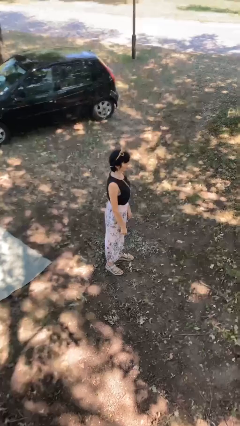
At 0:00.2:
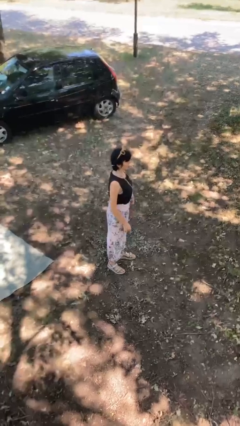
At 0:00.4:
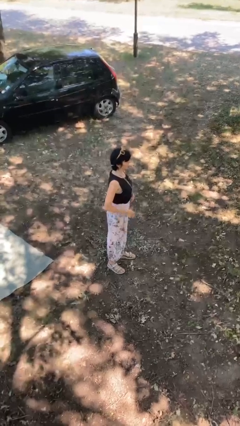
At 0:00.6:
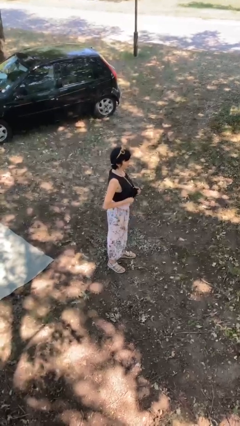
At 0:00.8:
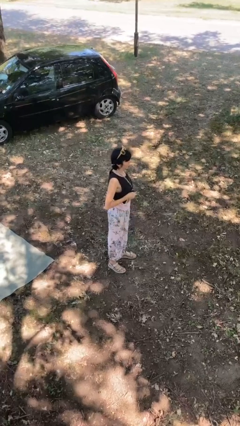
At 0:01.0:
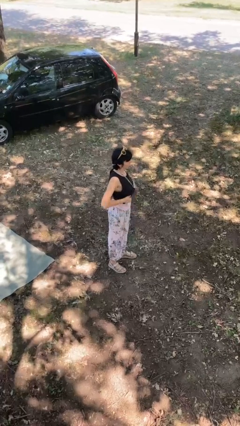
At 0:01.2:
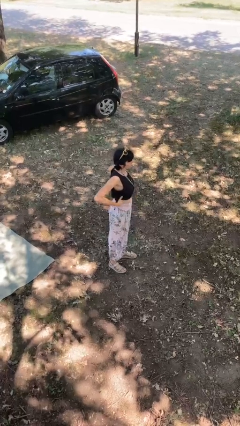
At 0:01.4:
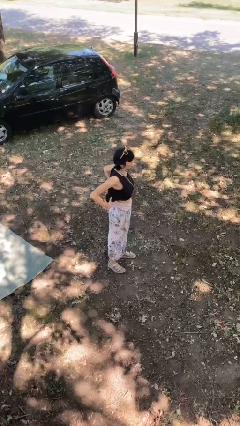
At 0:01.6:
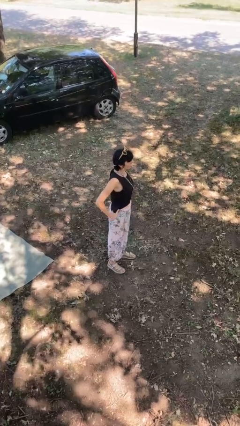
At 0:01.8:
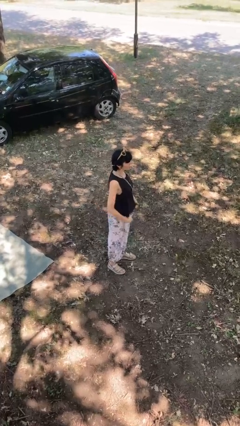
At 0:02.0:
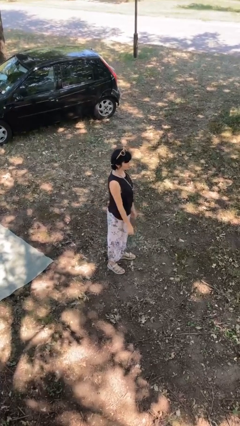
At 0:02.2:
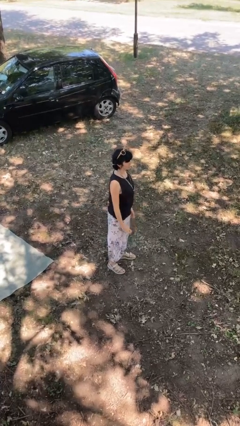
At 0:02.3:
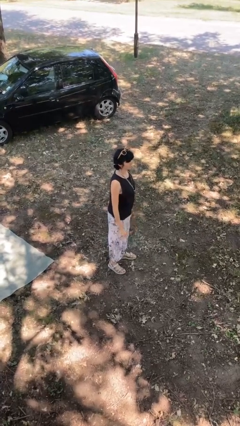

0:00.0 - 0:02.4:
person untucks shirt

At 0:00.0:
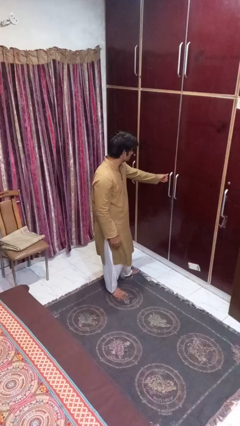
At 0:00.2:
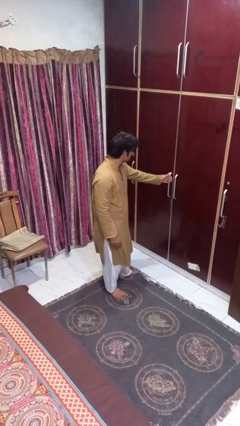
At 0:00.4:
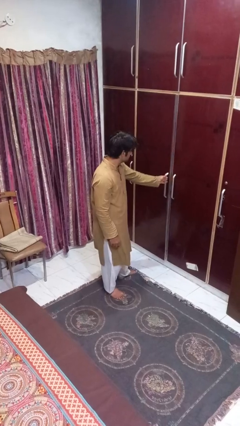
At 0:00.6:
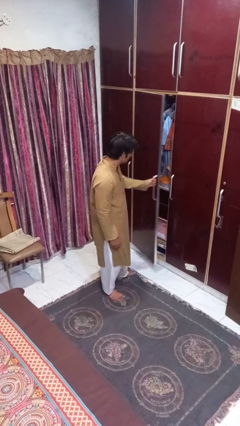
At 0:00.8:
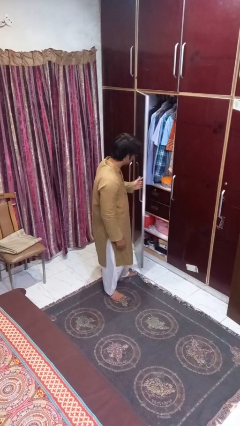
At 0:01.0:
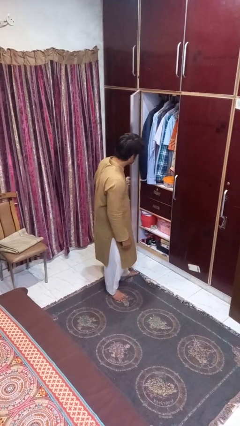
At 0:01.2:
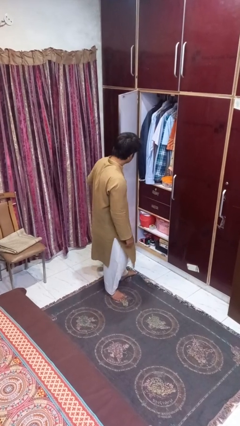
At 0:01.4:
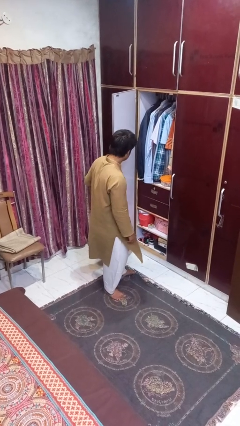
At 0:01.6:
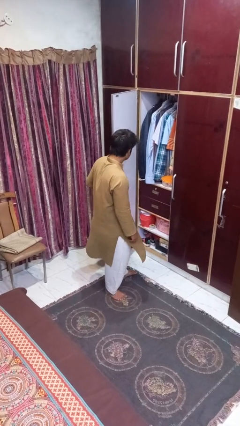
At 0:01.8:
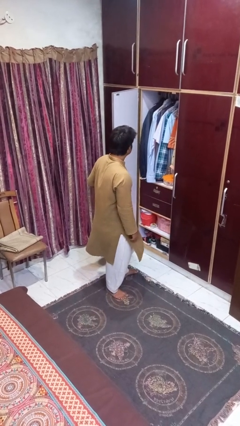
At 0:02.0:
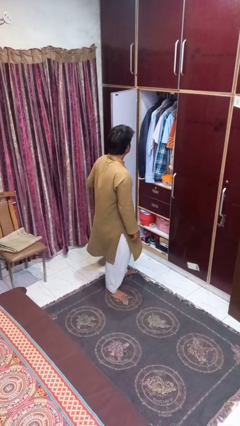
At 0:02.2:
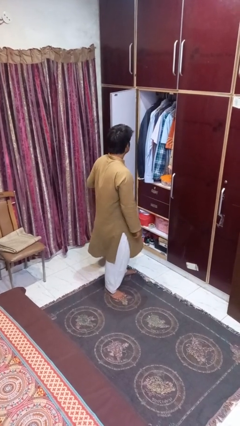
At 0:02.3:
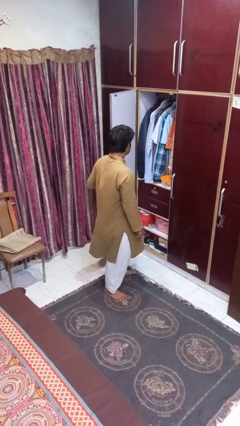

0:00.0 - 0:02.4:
person opens closet door

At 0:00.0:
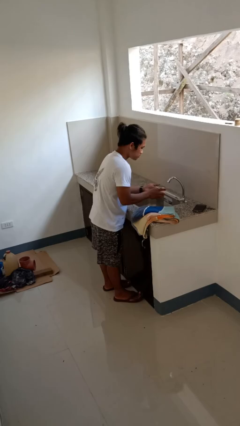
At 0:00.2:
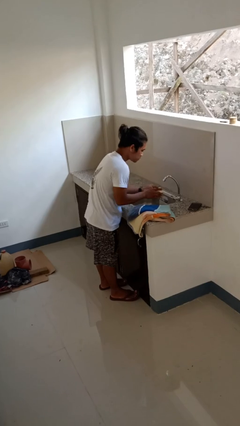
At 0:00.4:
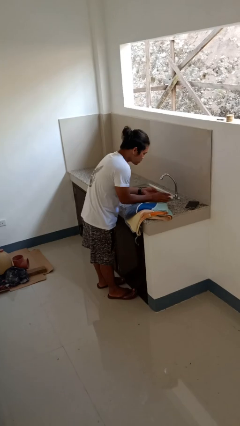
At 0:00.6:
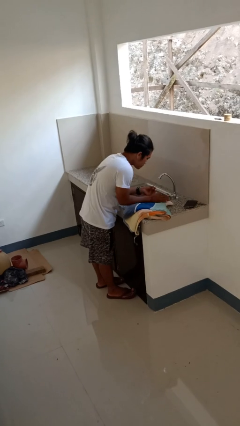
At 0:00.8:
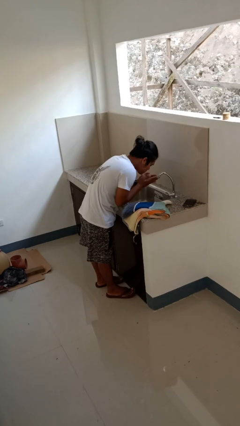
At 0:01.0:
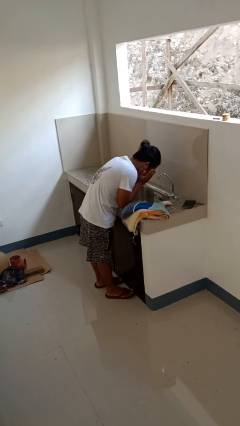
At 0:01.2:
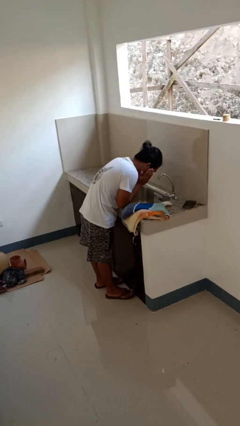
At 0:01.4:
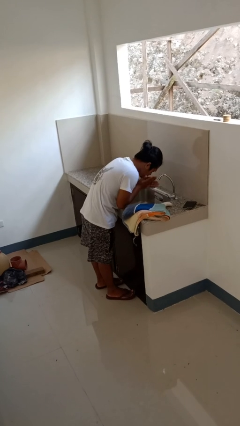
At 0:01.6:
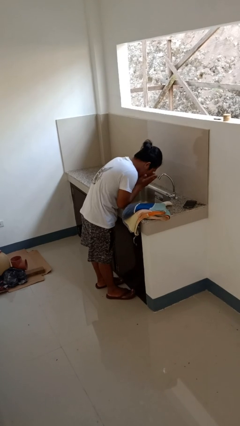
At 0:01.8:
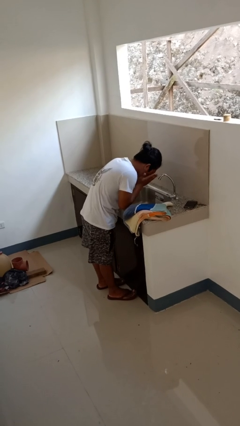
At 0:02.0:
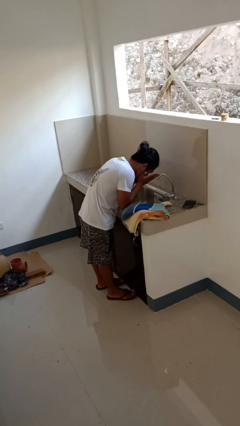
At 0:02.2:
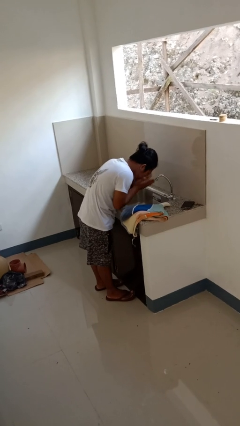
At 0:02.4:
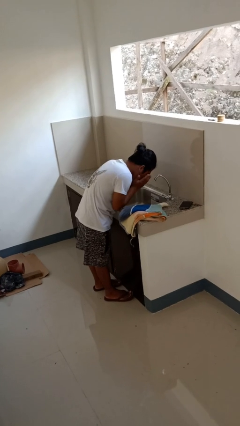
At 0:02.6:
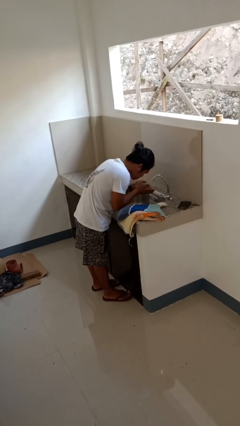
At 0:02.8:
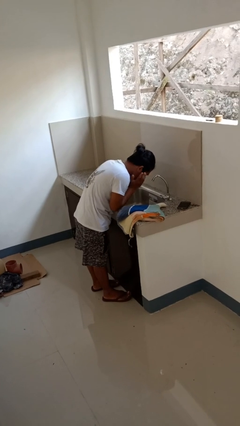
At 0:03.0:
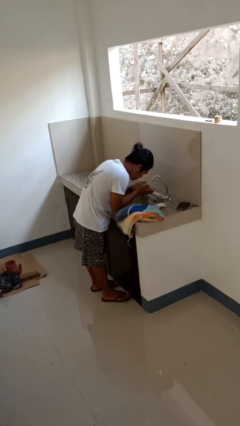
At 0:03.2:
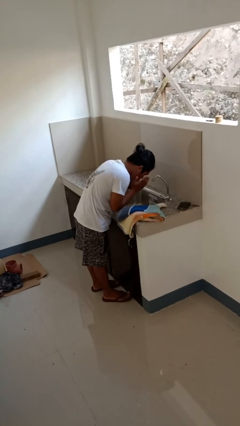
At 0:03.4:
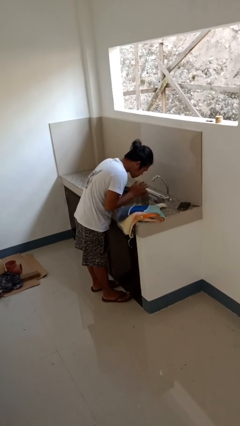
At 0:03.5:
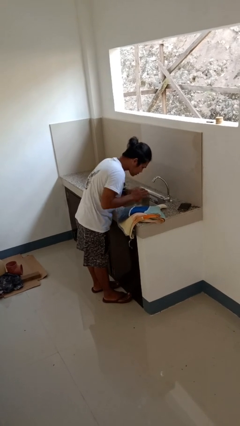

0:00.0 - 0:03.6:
person washes face

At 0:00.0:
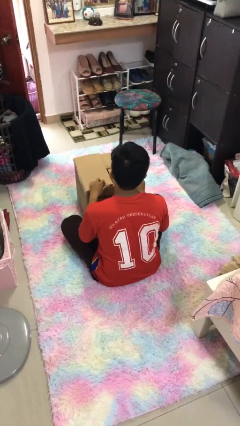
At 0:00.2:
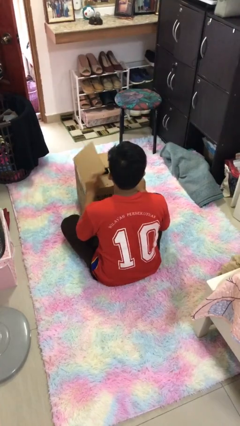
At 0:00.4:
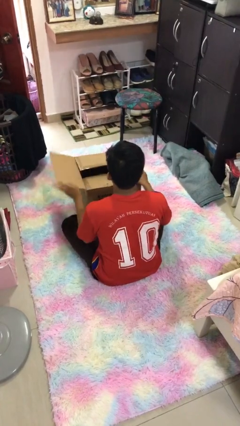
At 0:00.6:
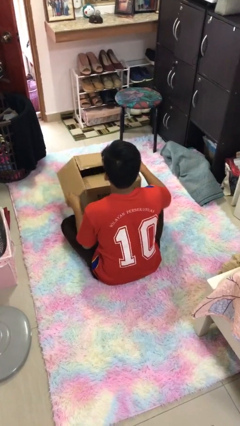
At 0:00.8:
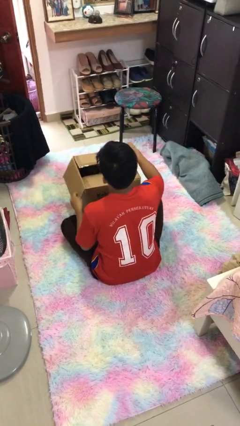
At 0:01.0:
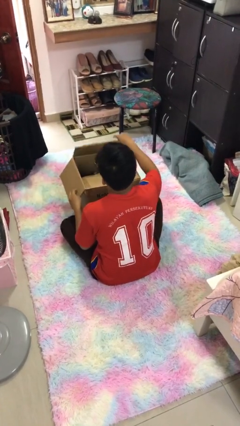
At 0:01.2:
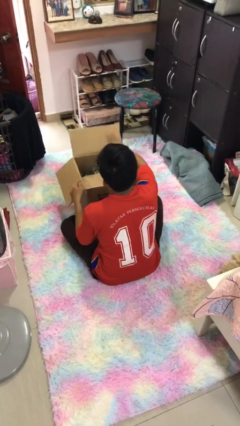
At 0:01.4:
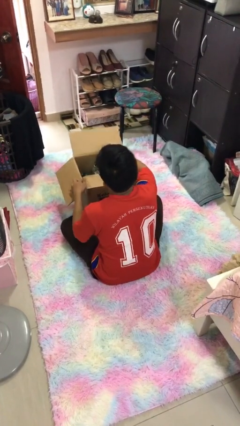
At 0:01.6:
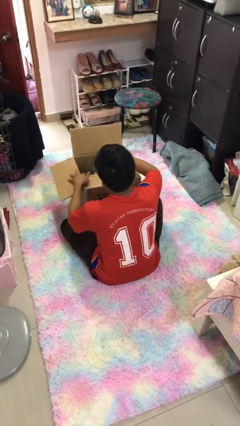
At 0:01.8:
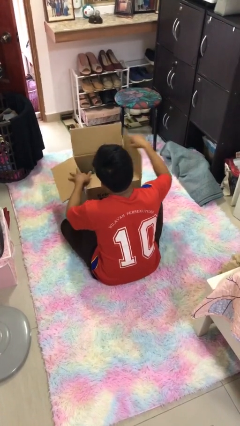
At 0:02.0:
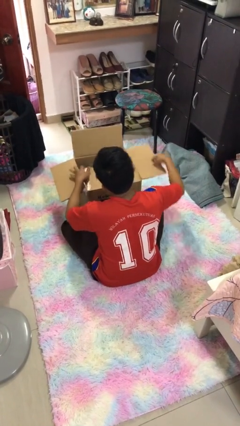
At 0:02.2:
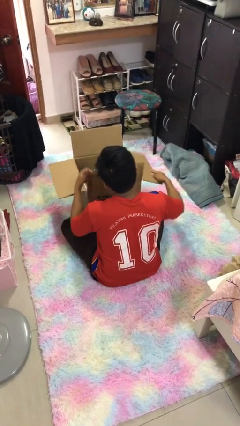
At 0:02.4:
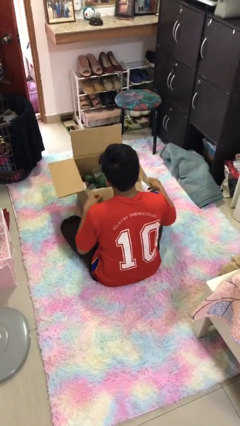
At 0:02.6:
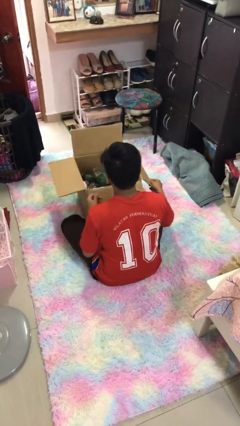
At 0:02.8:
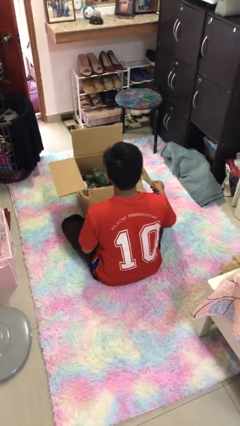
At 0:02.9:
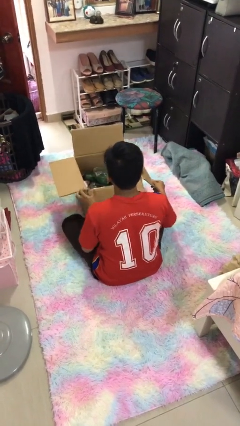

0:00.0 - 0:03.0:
person opens box

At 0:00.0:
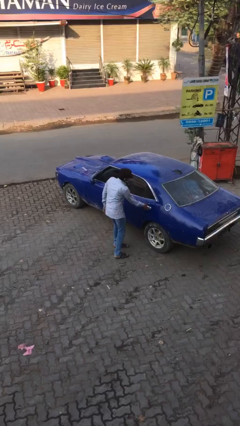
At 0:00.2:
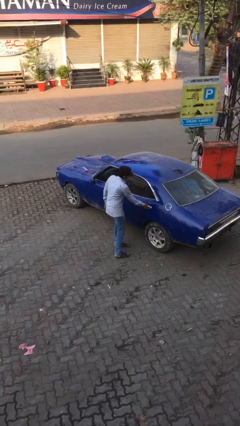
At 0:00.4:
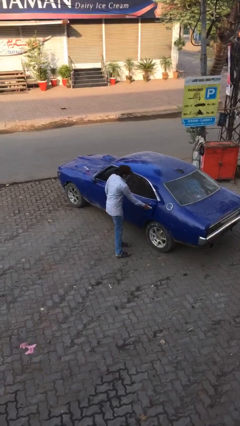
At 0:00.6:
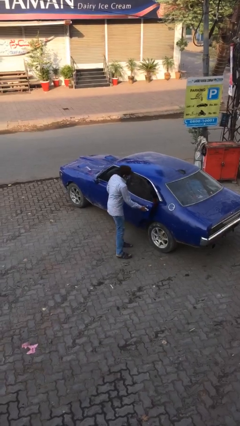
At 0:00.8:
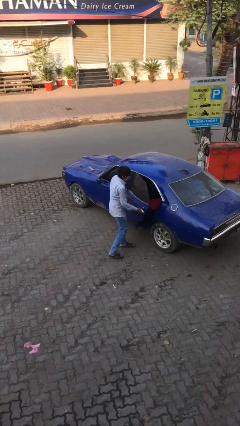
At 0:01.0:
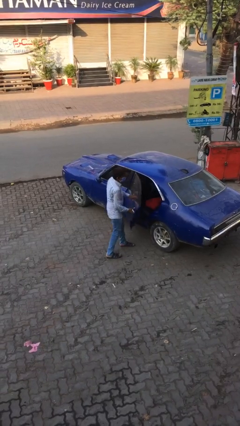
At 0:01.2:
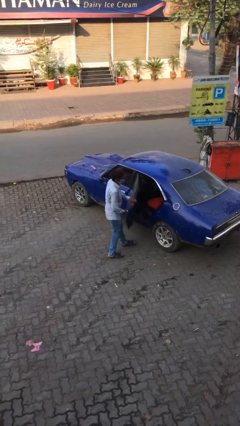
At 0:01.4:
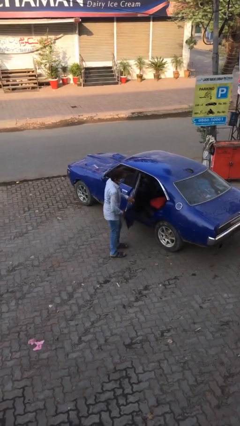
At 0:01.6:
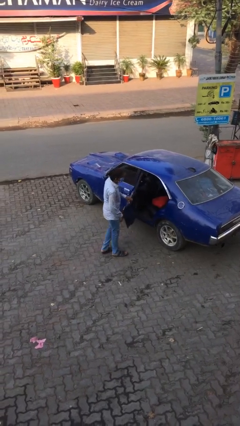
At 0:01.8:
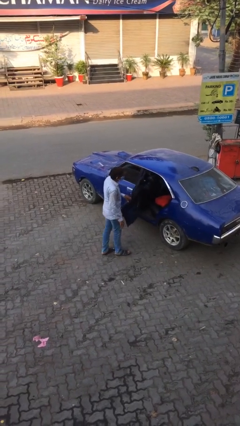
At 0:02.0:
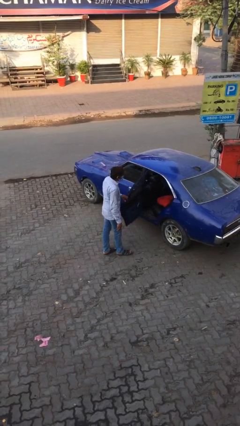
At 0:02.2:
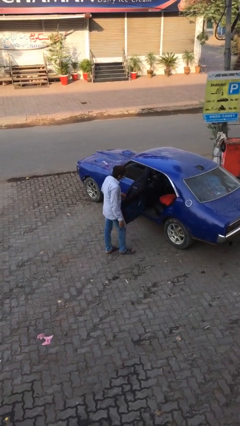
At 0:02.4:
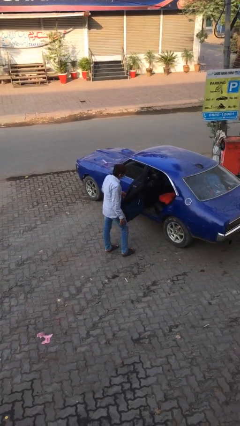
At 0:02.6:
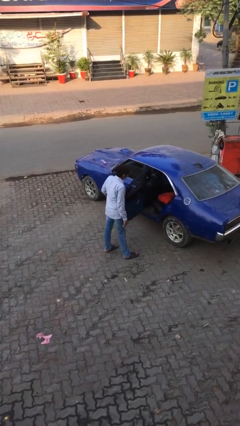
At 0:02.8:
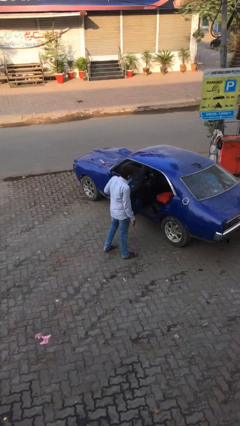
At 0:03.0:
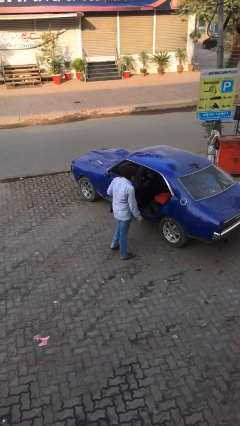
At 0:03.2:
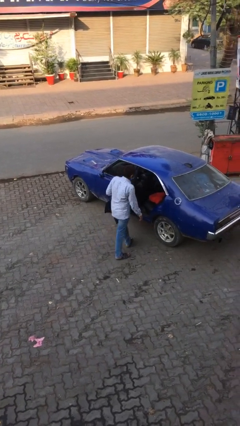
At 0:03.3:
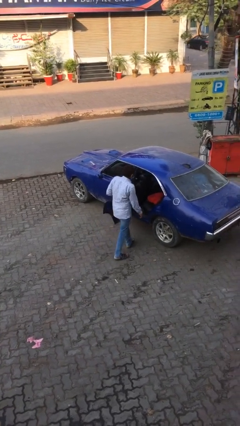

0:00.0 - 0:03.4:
person opens car door

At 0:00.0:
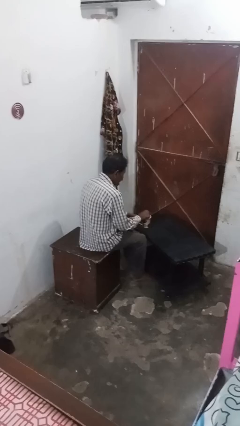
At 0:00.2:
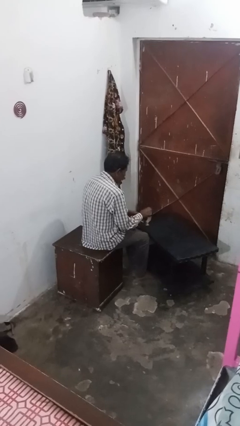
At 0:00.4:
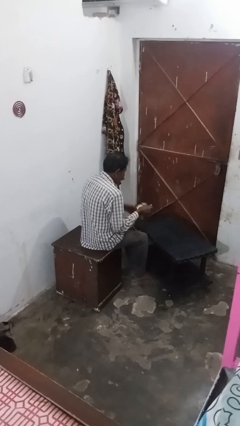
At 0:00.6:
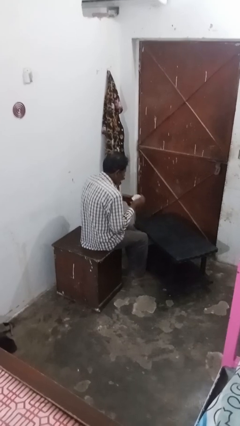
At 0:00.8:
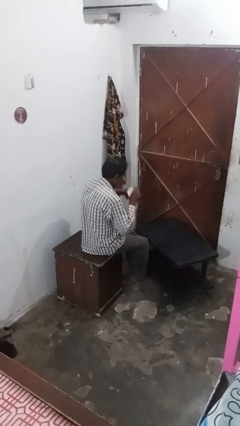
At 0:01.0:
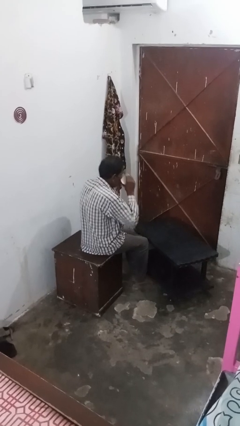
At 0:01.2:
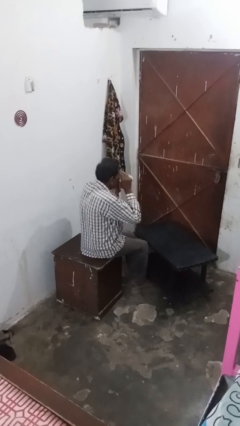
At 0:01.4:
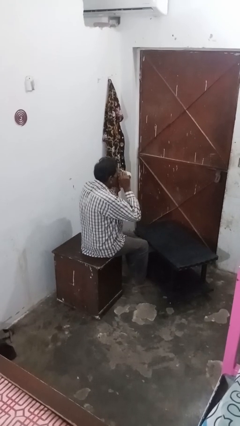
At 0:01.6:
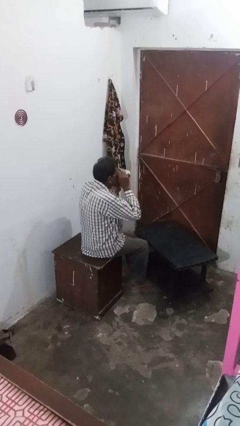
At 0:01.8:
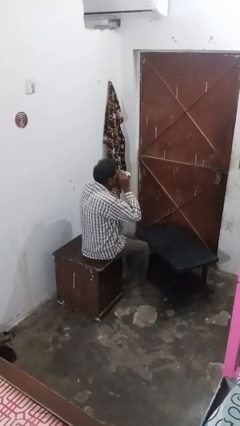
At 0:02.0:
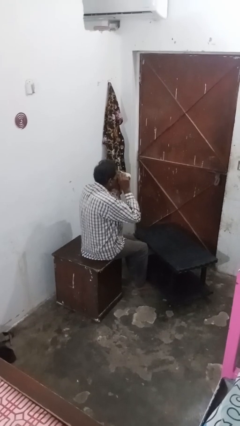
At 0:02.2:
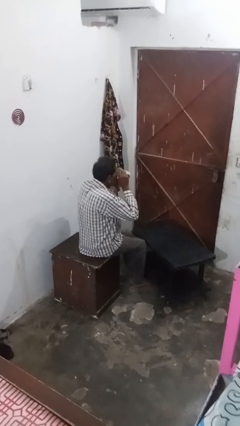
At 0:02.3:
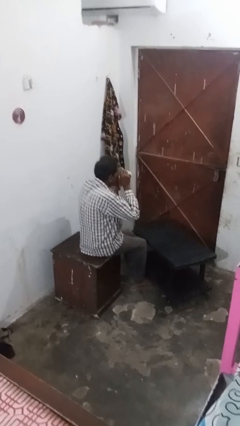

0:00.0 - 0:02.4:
person drinks from mug
